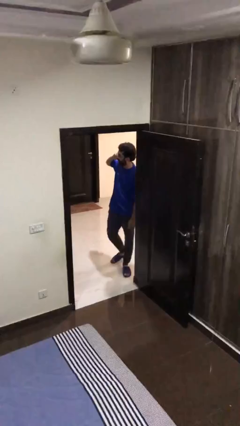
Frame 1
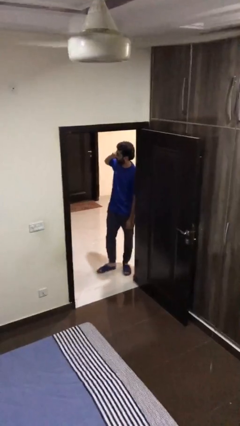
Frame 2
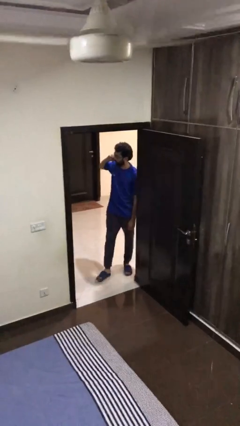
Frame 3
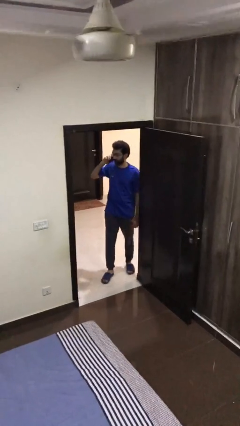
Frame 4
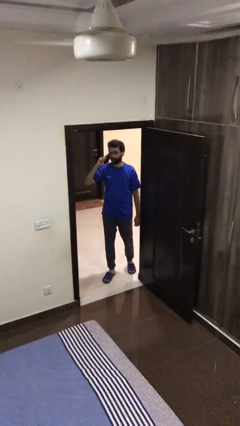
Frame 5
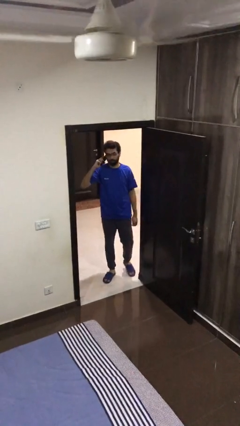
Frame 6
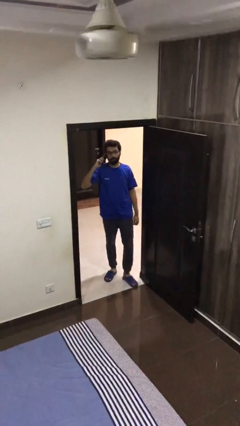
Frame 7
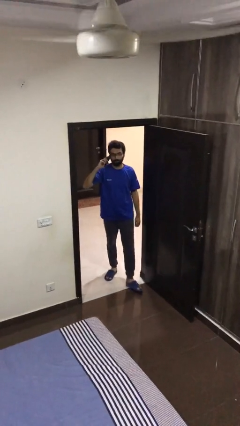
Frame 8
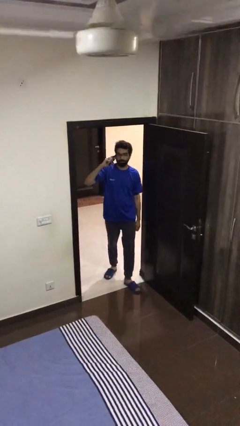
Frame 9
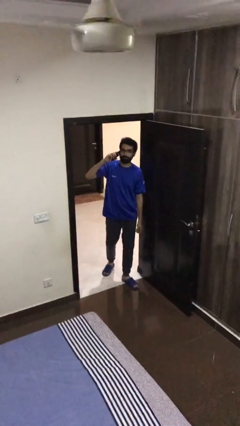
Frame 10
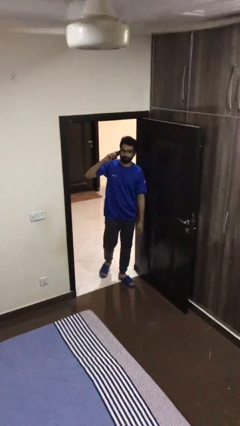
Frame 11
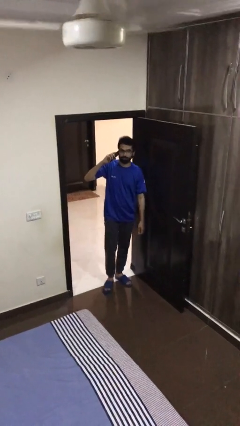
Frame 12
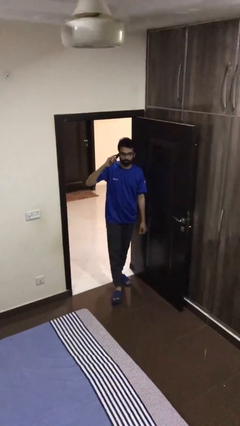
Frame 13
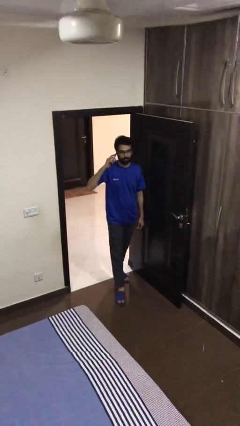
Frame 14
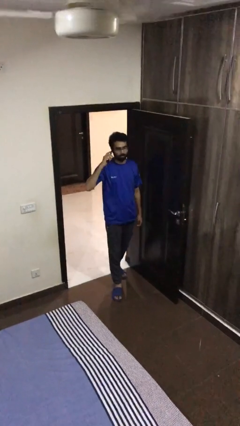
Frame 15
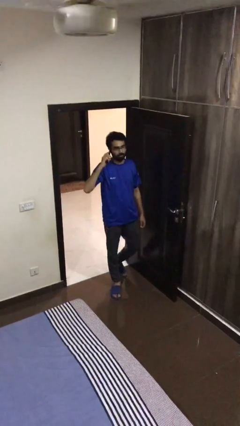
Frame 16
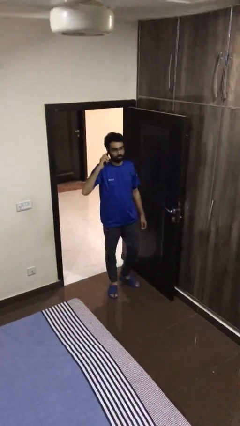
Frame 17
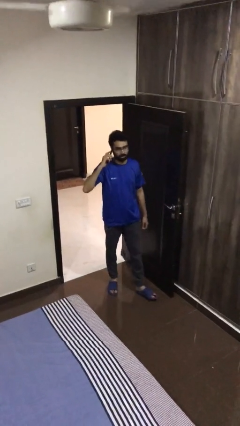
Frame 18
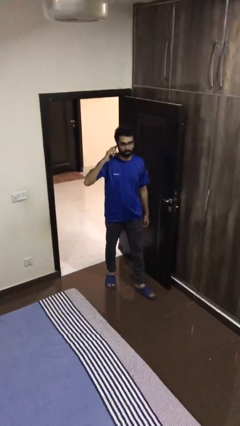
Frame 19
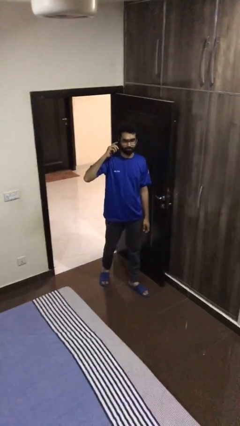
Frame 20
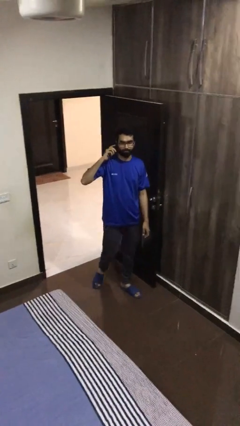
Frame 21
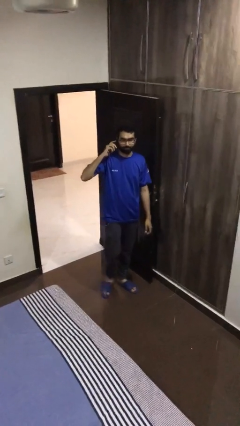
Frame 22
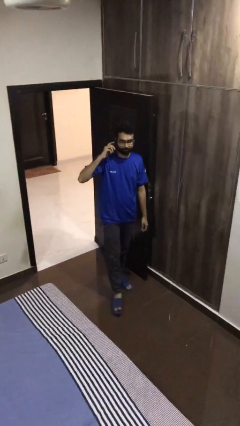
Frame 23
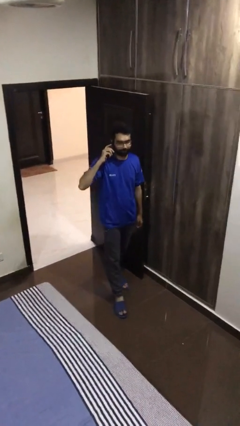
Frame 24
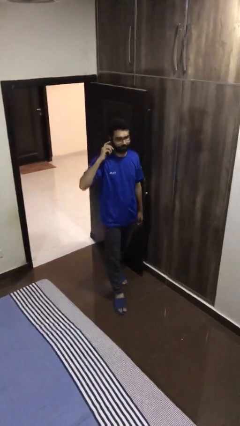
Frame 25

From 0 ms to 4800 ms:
person enters scene through structure

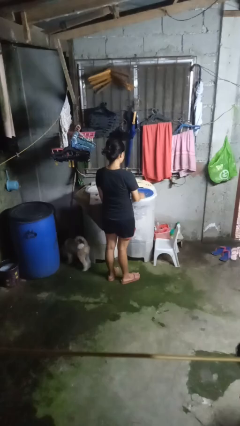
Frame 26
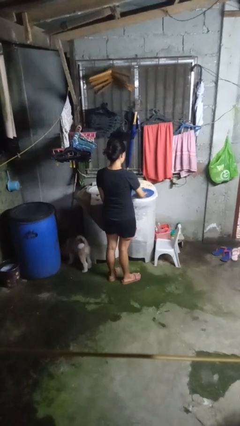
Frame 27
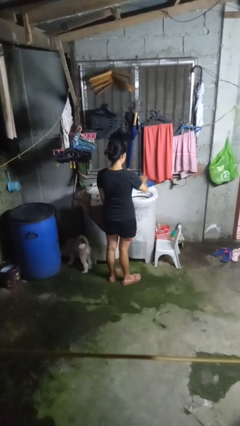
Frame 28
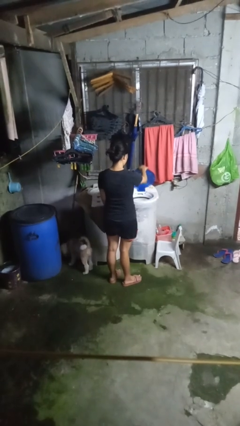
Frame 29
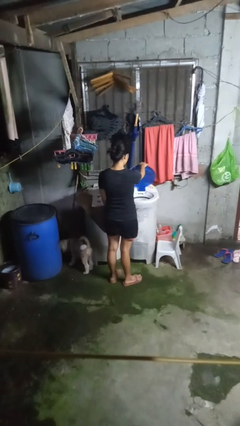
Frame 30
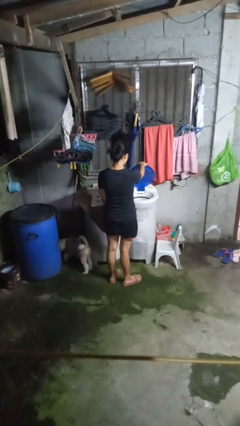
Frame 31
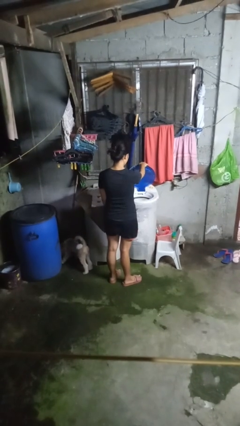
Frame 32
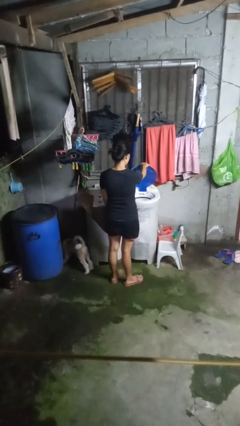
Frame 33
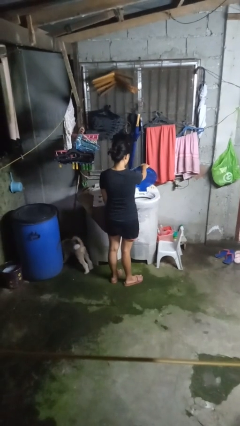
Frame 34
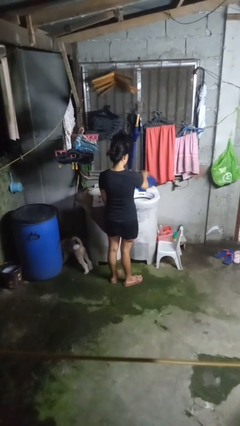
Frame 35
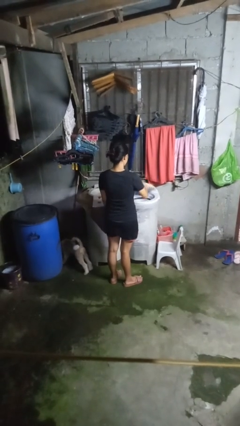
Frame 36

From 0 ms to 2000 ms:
person opens clothes washer

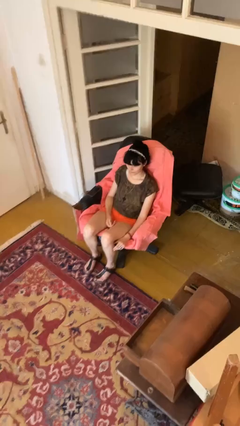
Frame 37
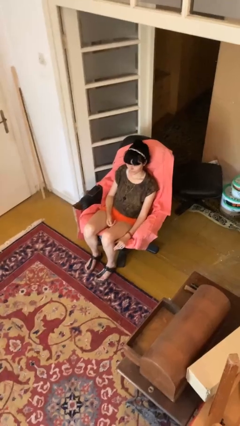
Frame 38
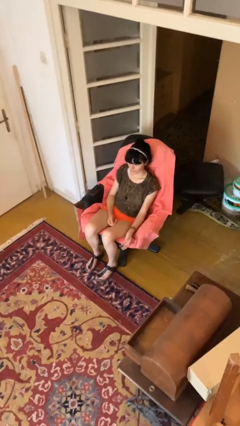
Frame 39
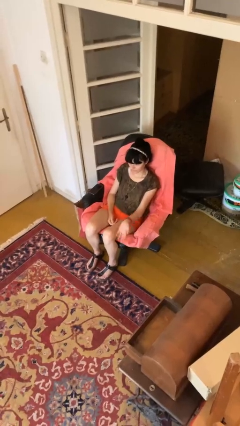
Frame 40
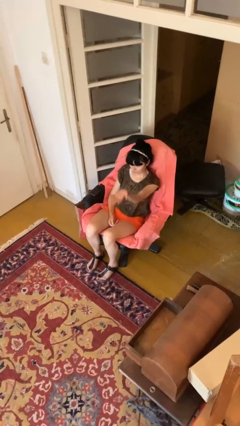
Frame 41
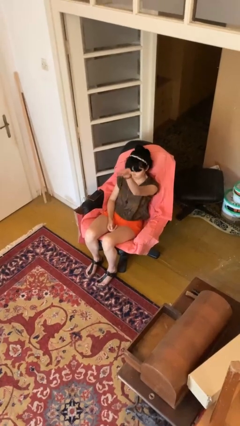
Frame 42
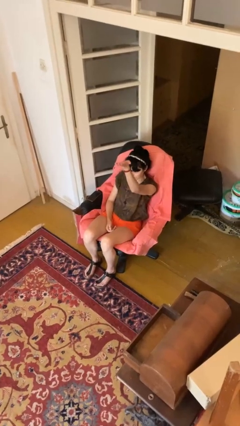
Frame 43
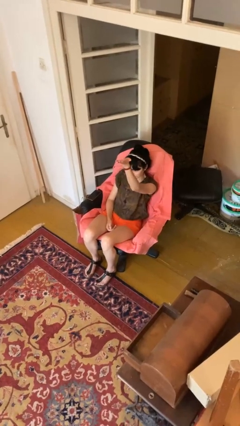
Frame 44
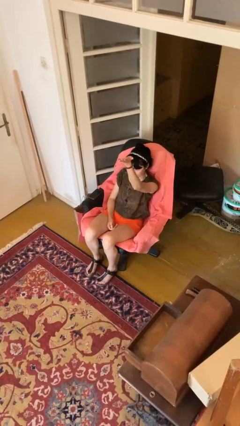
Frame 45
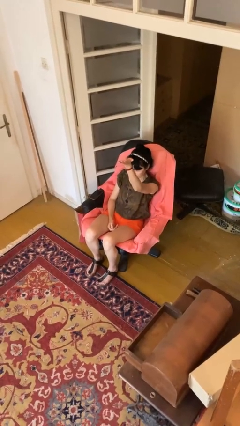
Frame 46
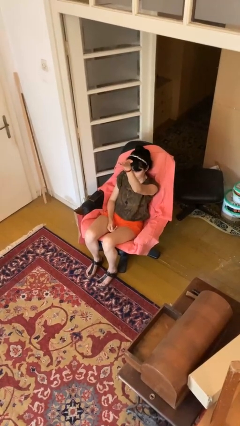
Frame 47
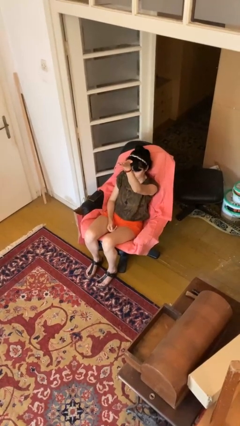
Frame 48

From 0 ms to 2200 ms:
person gestures swipe up

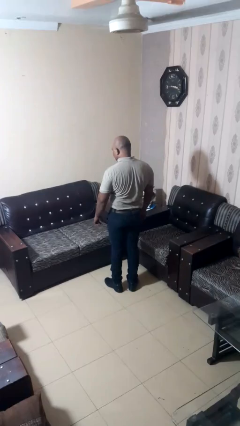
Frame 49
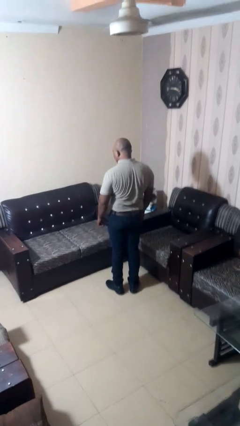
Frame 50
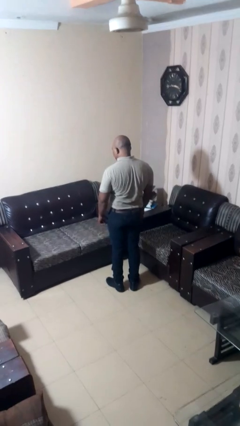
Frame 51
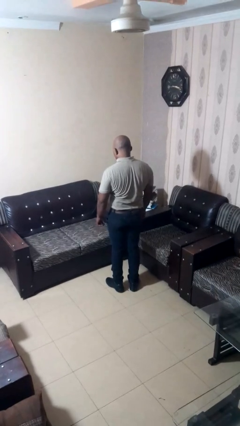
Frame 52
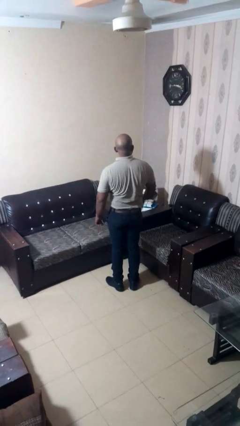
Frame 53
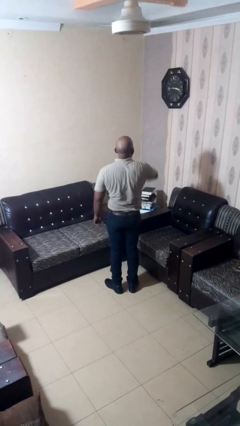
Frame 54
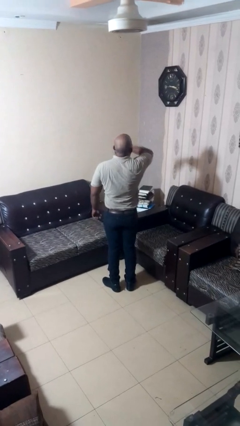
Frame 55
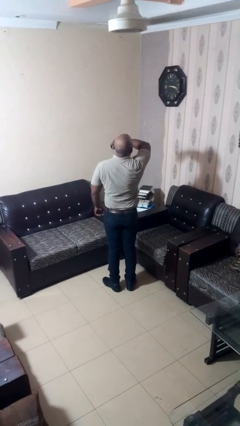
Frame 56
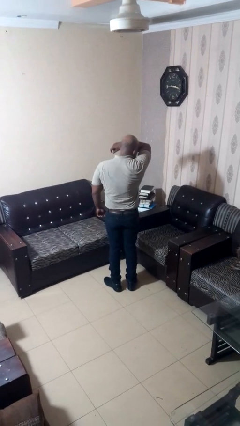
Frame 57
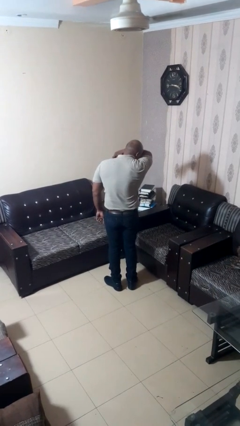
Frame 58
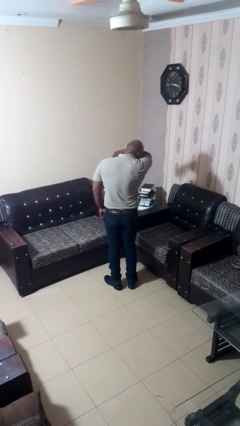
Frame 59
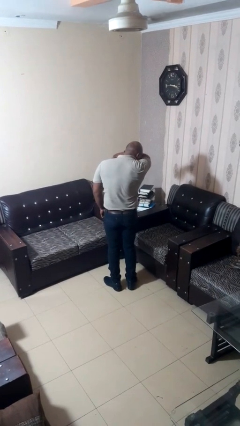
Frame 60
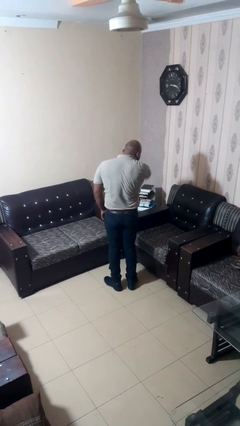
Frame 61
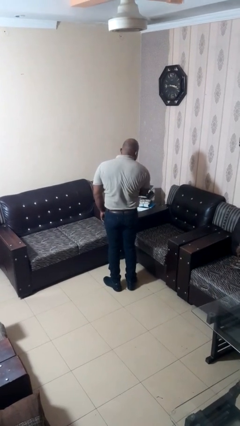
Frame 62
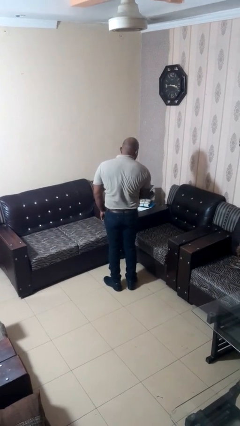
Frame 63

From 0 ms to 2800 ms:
person sneezes into arm

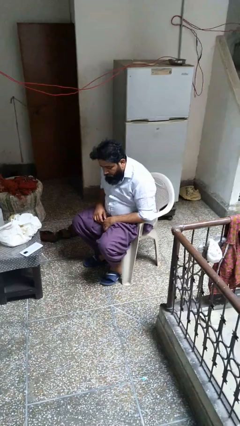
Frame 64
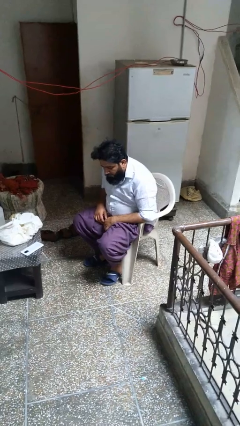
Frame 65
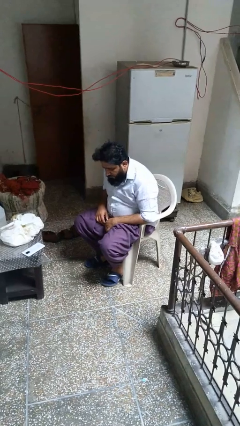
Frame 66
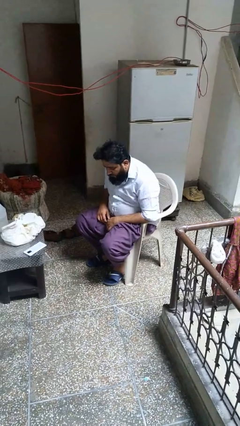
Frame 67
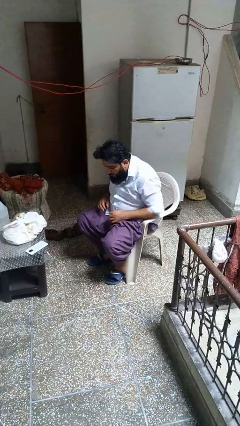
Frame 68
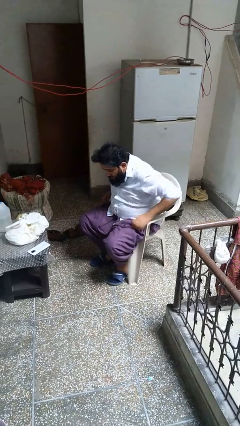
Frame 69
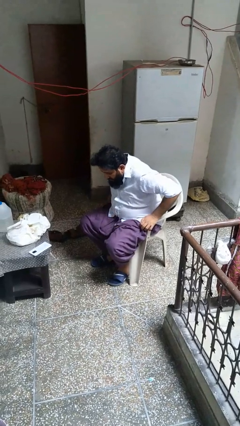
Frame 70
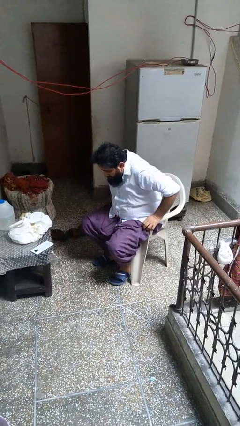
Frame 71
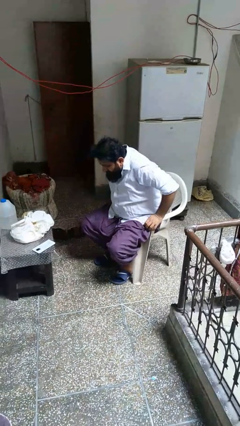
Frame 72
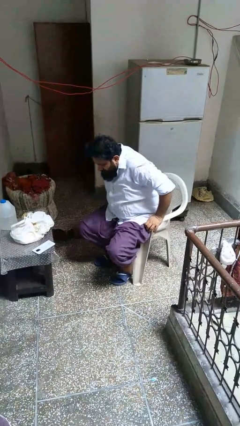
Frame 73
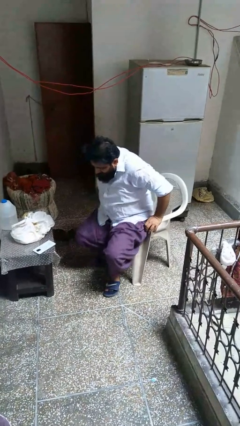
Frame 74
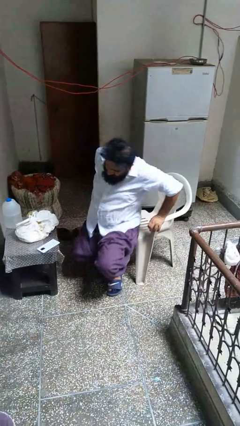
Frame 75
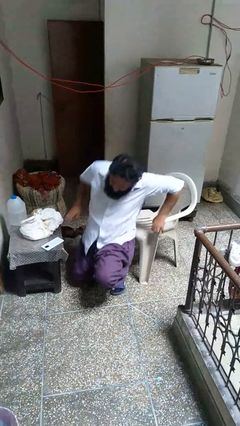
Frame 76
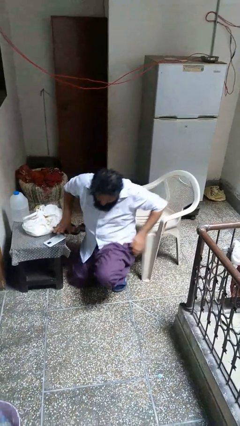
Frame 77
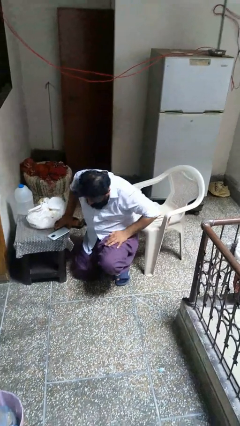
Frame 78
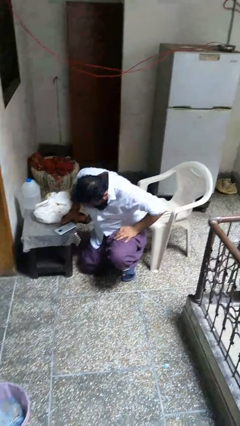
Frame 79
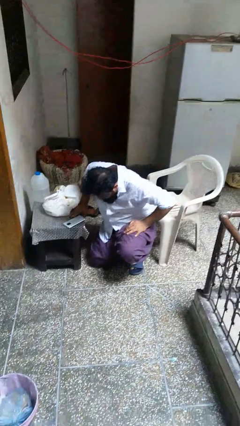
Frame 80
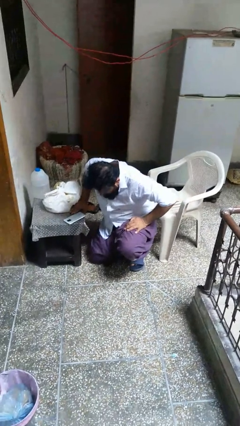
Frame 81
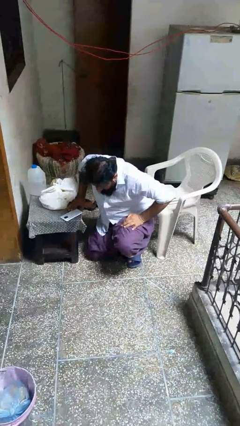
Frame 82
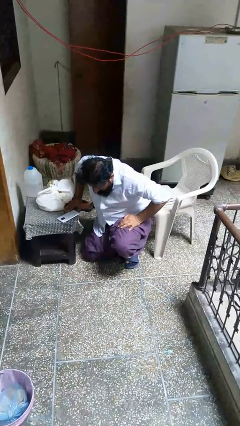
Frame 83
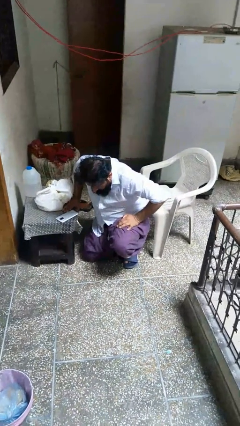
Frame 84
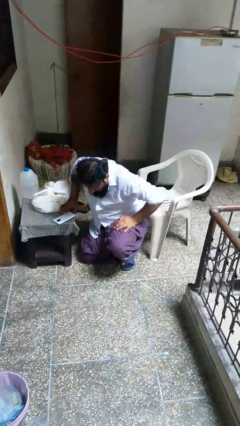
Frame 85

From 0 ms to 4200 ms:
person falls from chair

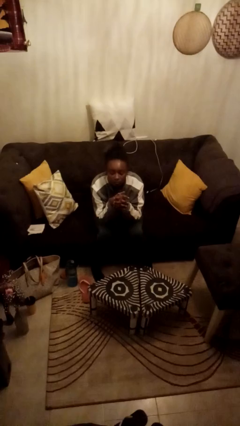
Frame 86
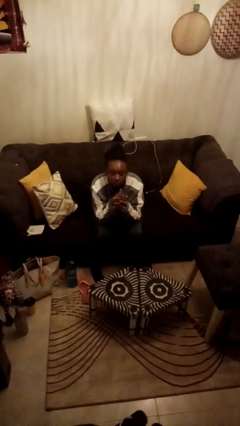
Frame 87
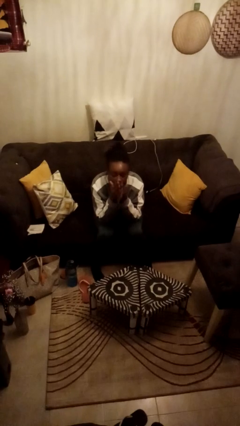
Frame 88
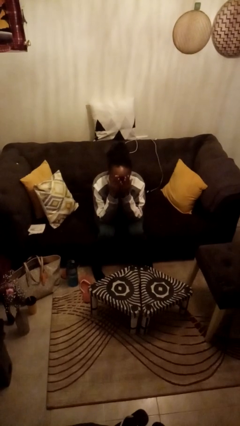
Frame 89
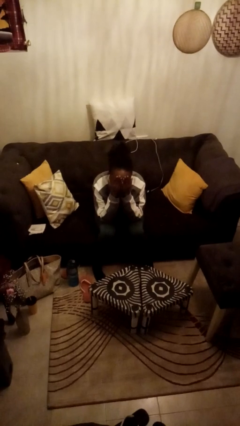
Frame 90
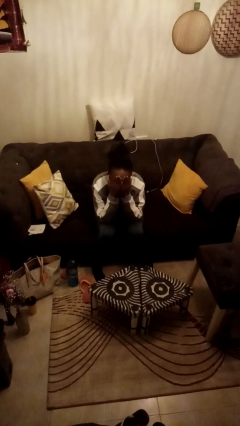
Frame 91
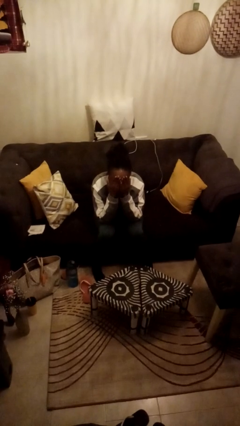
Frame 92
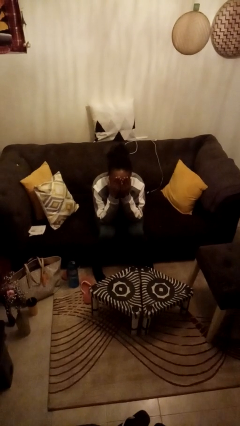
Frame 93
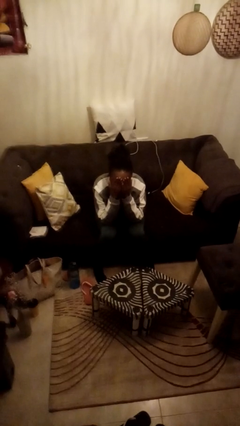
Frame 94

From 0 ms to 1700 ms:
person covers face with hands
